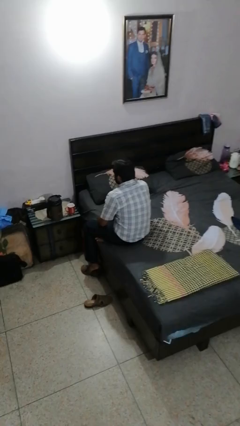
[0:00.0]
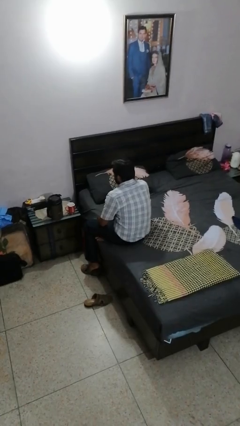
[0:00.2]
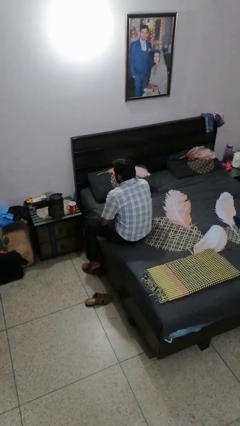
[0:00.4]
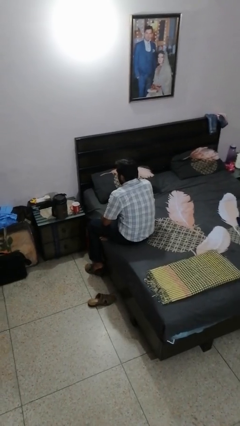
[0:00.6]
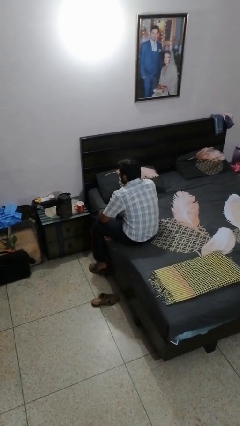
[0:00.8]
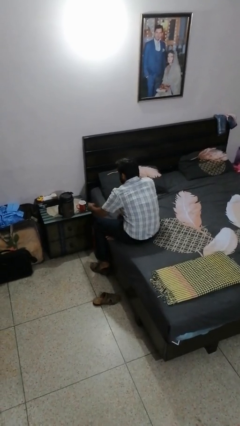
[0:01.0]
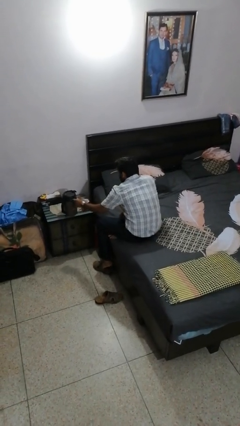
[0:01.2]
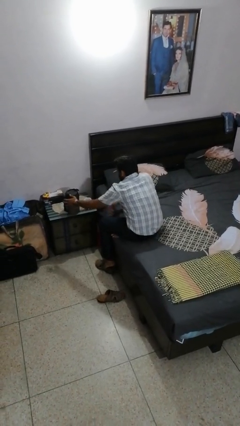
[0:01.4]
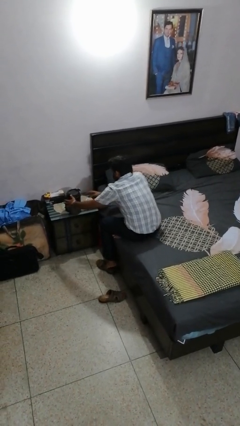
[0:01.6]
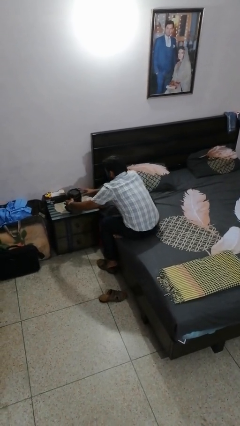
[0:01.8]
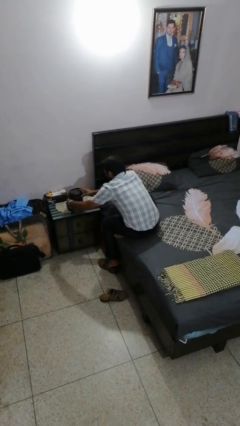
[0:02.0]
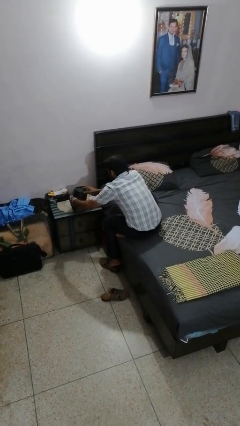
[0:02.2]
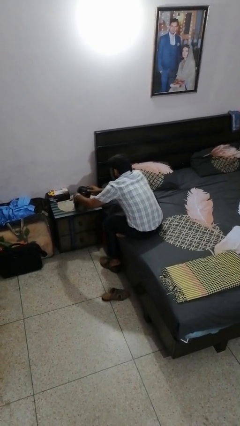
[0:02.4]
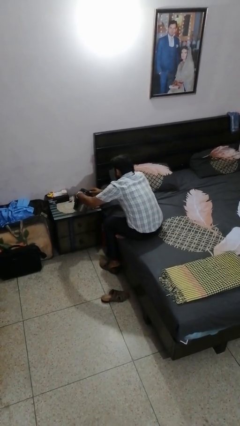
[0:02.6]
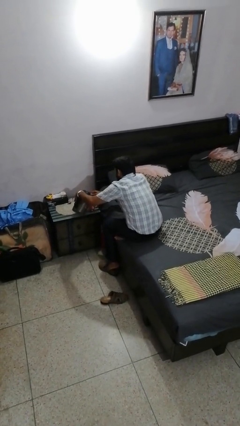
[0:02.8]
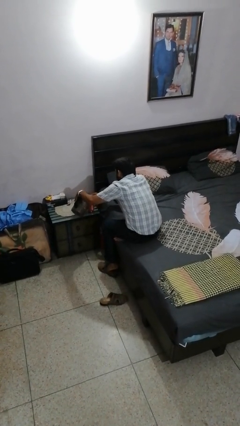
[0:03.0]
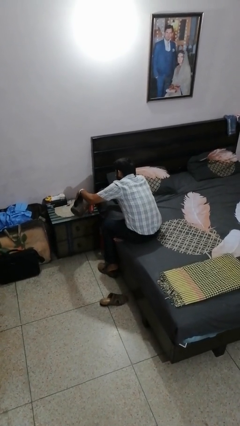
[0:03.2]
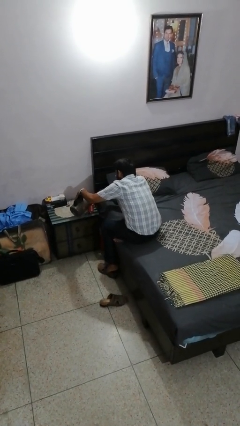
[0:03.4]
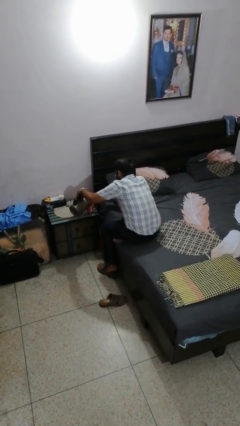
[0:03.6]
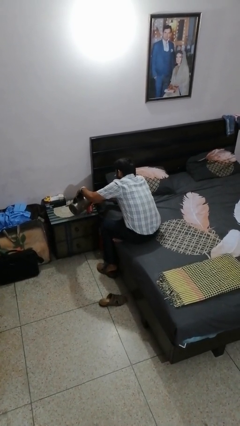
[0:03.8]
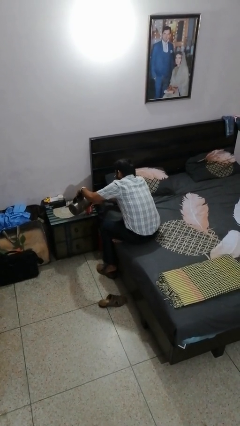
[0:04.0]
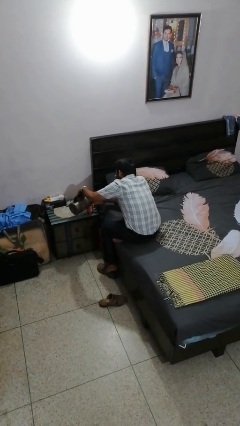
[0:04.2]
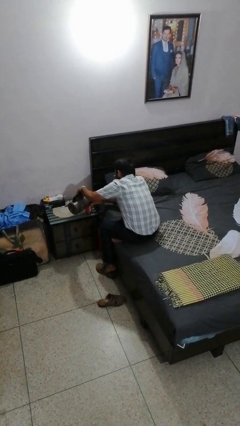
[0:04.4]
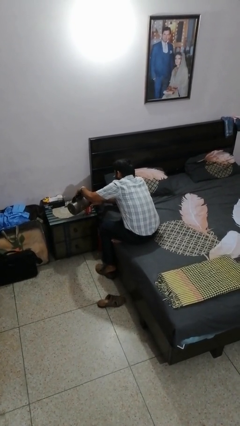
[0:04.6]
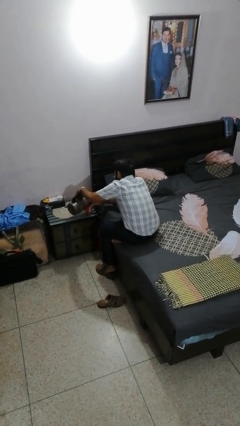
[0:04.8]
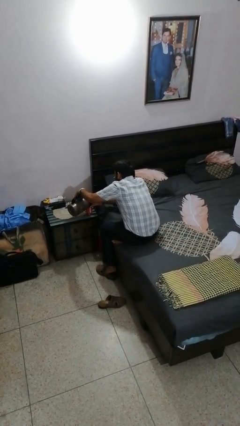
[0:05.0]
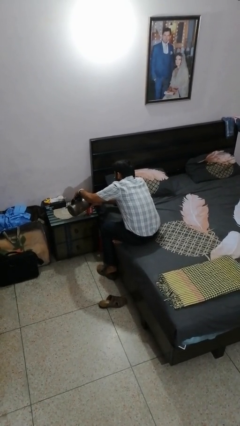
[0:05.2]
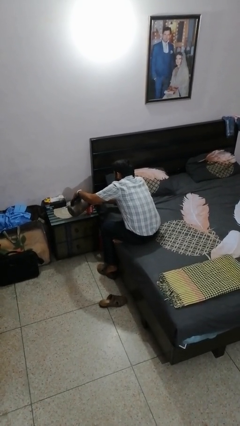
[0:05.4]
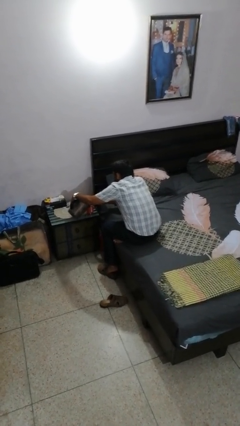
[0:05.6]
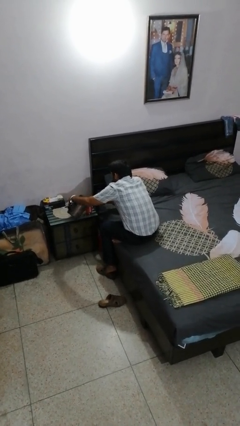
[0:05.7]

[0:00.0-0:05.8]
person pours coffee into mug

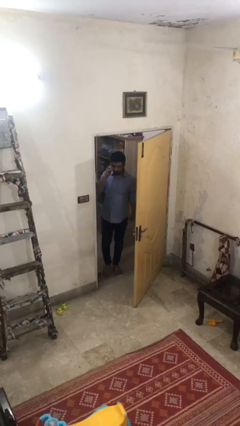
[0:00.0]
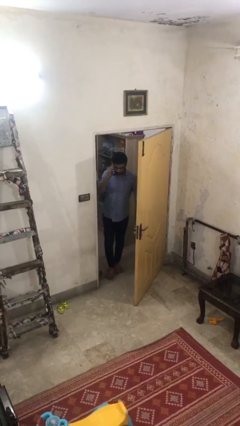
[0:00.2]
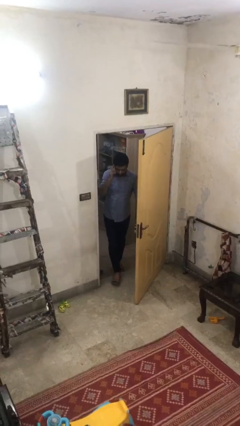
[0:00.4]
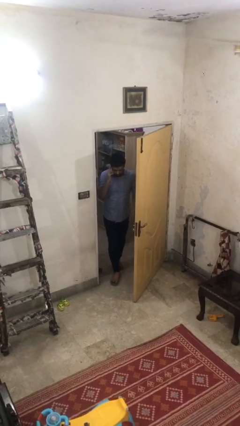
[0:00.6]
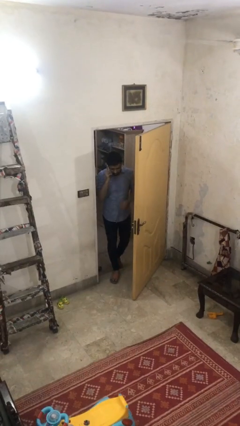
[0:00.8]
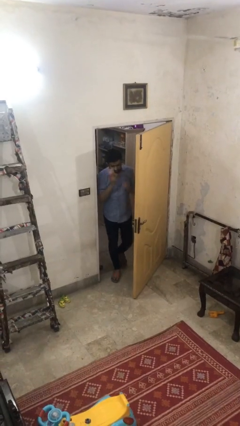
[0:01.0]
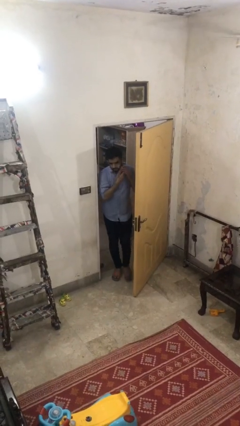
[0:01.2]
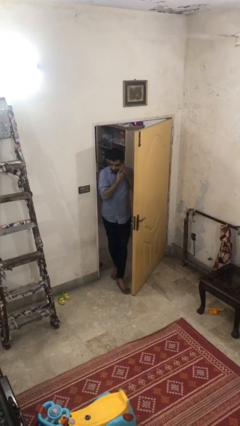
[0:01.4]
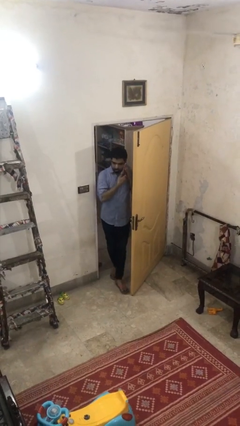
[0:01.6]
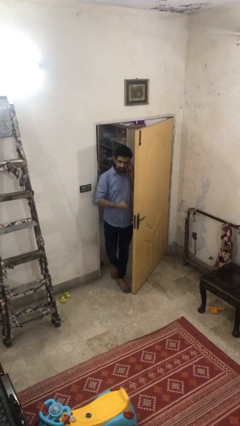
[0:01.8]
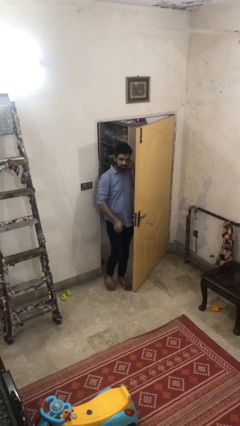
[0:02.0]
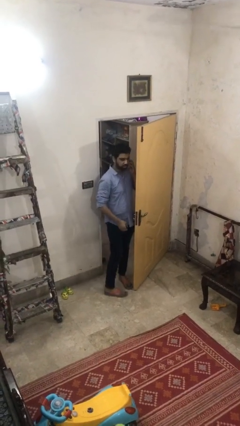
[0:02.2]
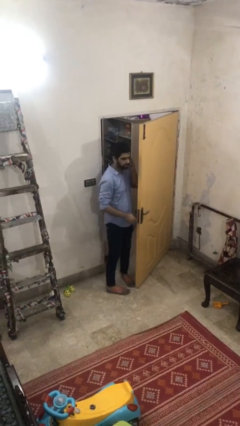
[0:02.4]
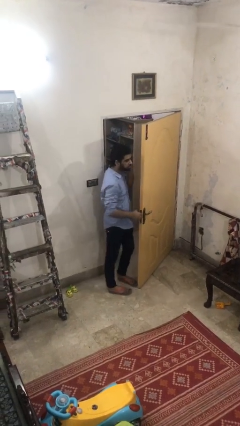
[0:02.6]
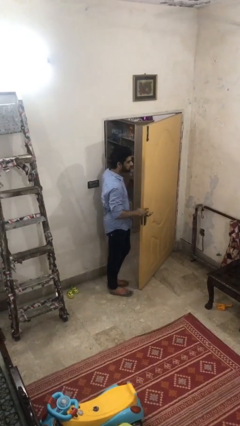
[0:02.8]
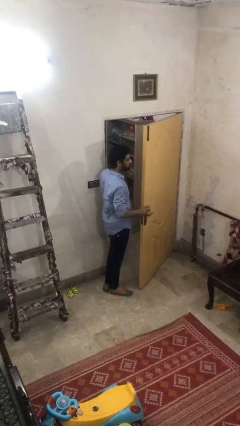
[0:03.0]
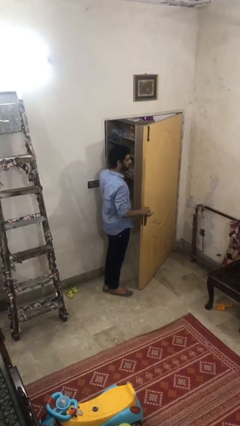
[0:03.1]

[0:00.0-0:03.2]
person enters scene through structure

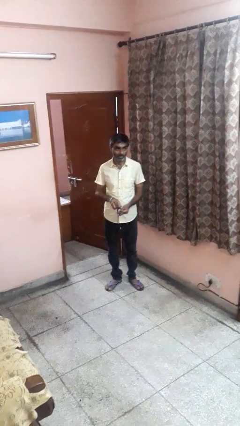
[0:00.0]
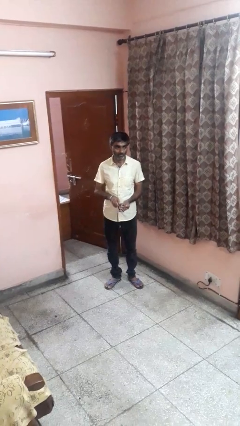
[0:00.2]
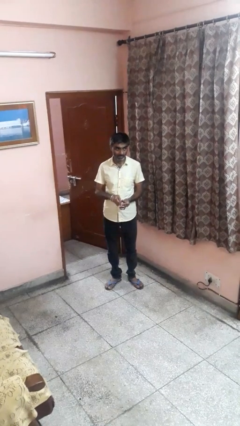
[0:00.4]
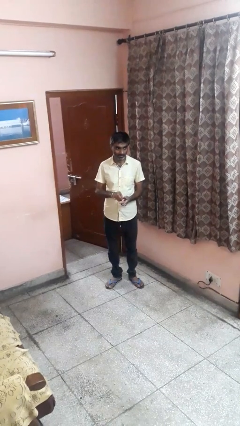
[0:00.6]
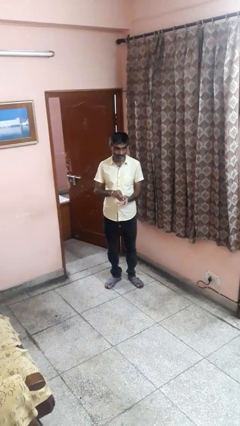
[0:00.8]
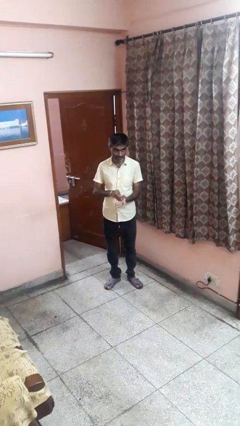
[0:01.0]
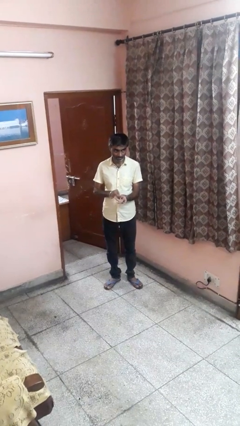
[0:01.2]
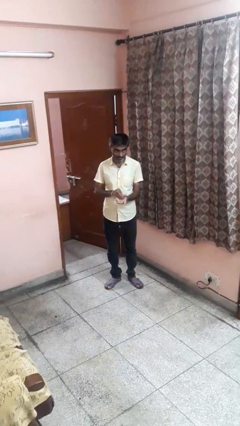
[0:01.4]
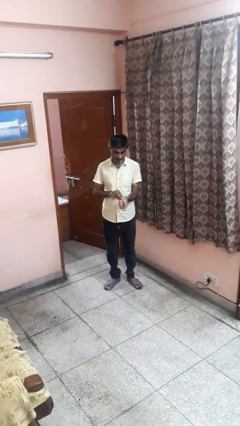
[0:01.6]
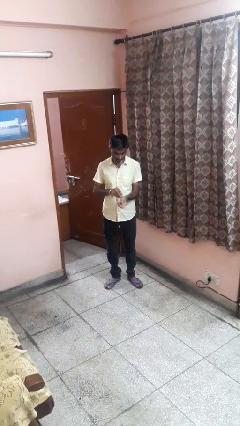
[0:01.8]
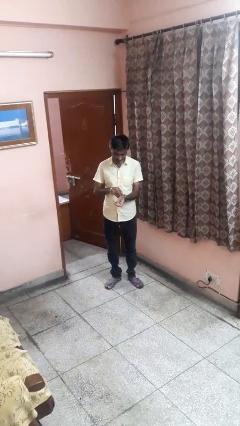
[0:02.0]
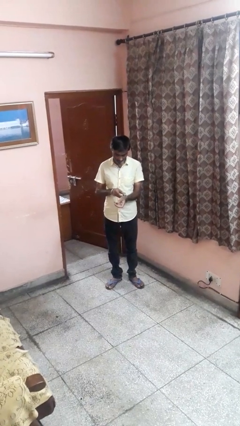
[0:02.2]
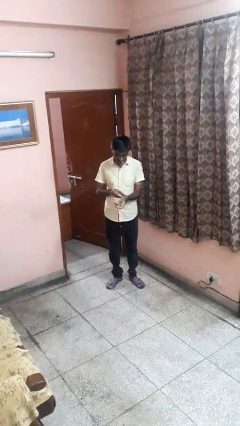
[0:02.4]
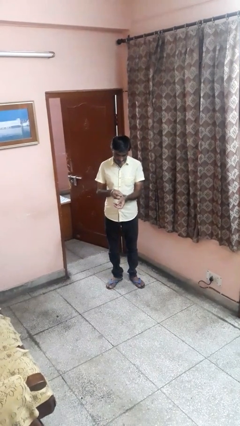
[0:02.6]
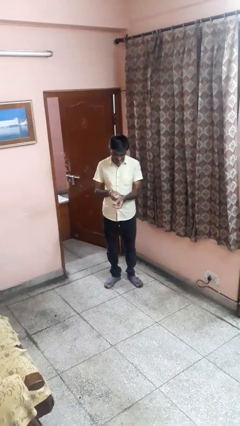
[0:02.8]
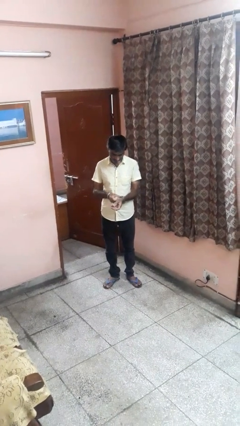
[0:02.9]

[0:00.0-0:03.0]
person puts on wristwatch

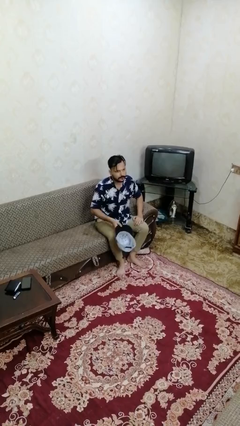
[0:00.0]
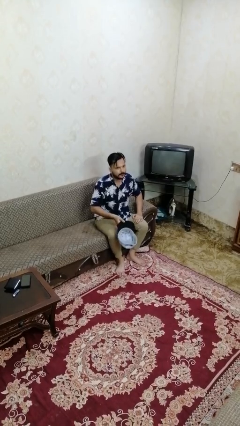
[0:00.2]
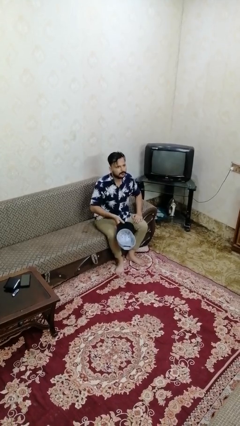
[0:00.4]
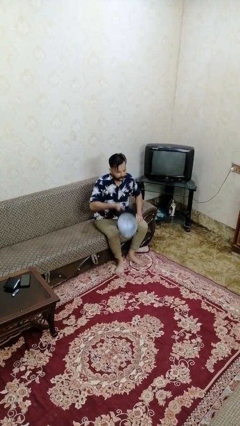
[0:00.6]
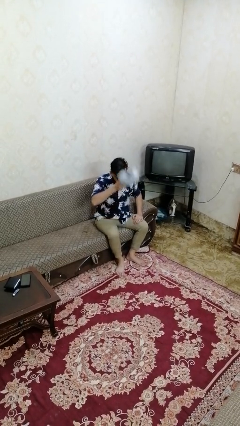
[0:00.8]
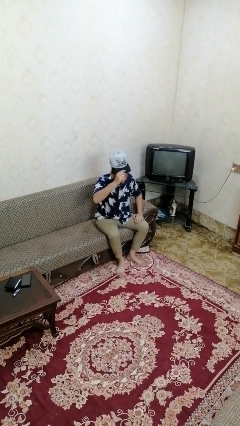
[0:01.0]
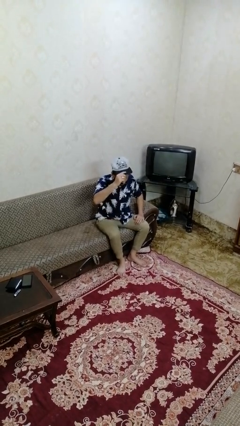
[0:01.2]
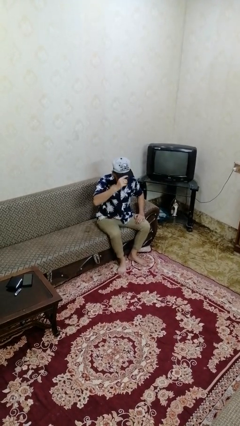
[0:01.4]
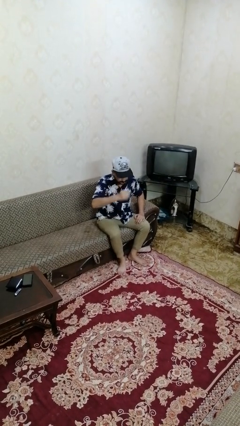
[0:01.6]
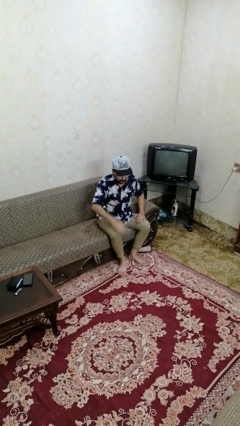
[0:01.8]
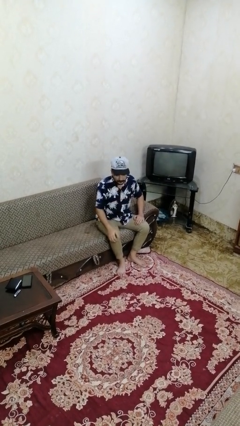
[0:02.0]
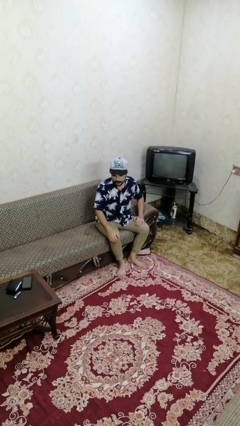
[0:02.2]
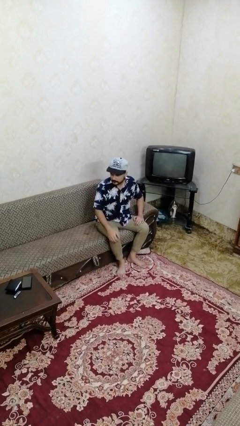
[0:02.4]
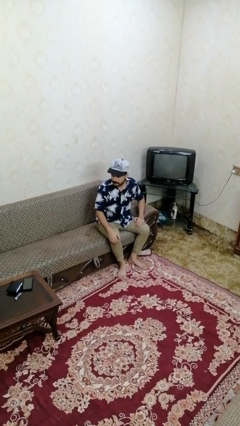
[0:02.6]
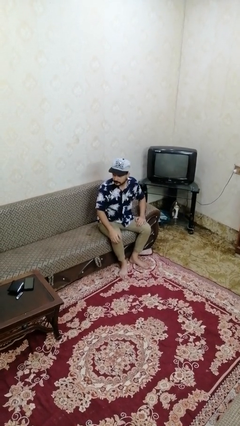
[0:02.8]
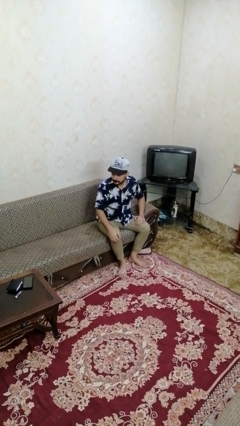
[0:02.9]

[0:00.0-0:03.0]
person puts on hat

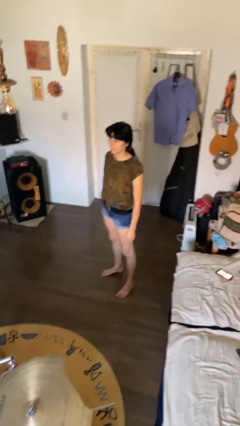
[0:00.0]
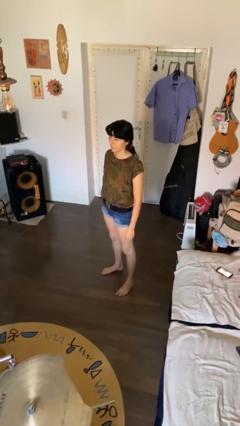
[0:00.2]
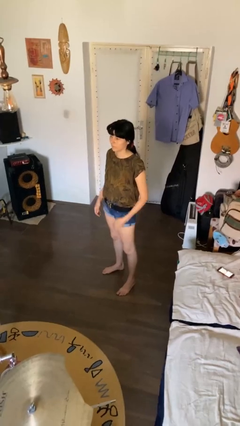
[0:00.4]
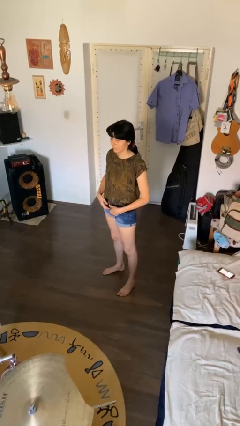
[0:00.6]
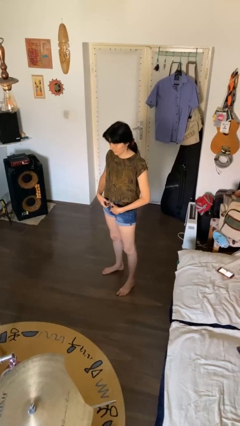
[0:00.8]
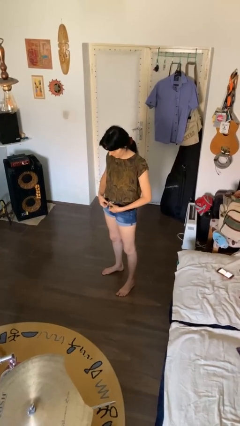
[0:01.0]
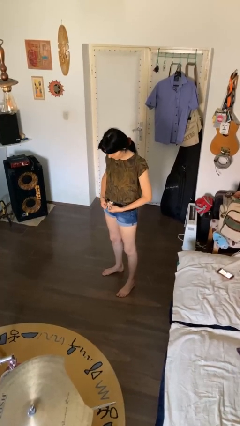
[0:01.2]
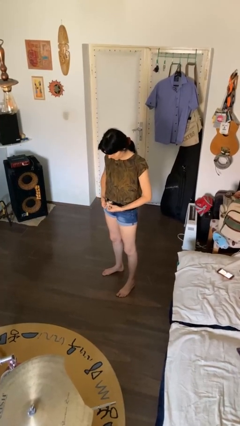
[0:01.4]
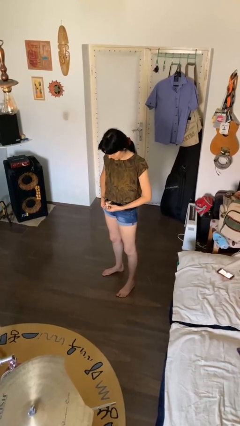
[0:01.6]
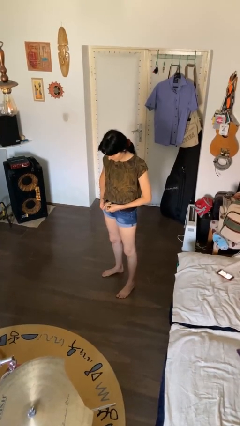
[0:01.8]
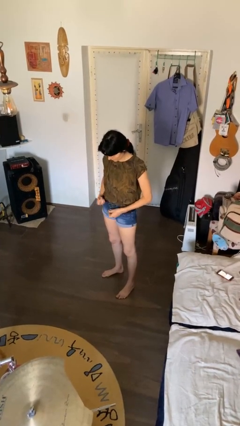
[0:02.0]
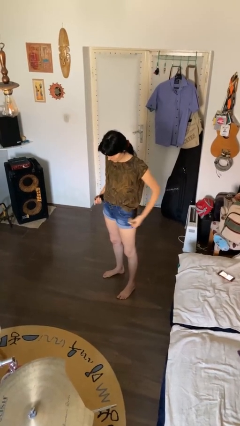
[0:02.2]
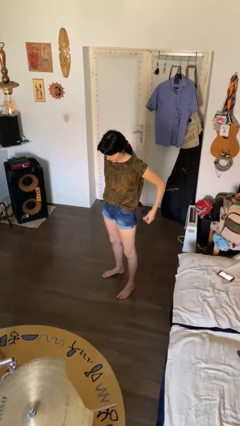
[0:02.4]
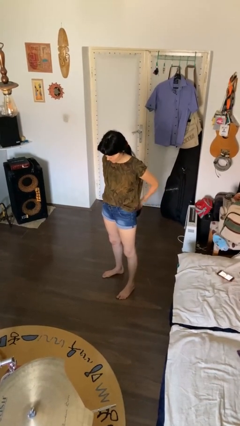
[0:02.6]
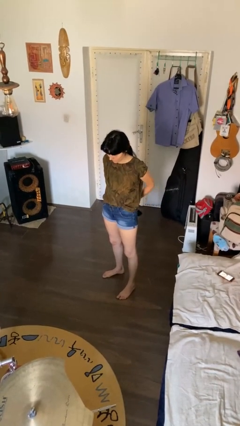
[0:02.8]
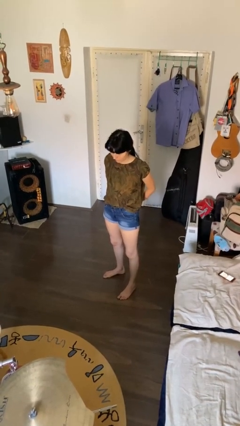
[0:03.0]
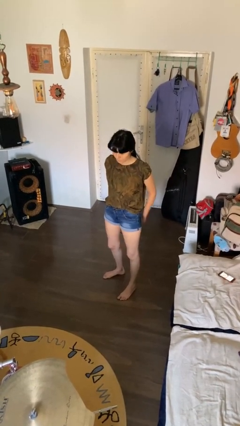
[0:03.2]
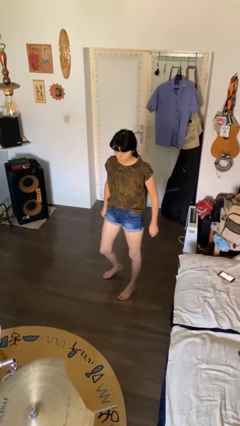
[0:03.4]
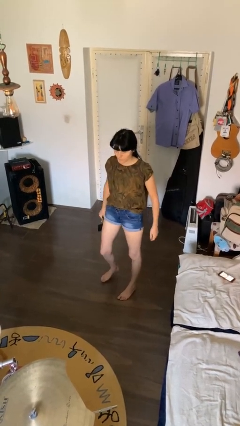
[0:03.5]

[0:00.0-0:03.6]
person takes off belt
